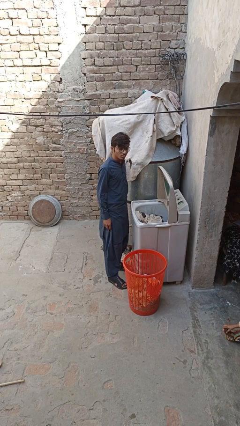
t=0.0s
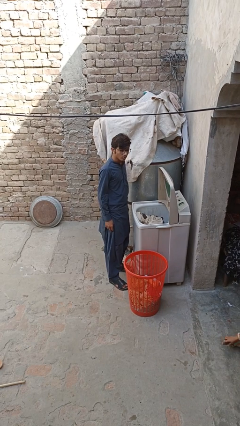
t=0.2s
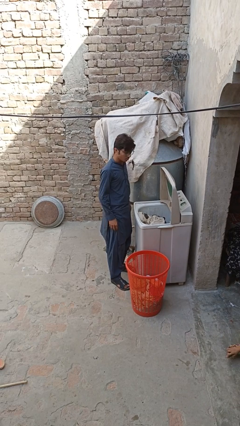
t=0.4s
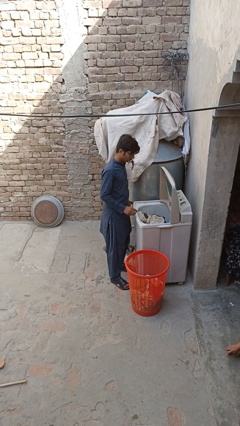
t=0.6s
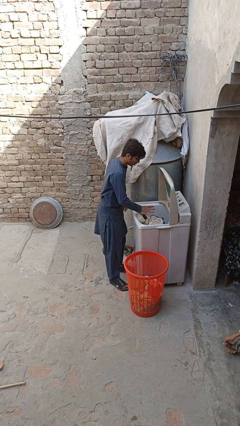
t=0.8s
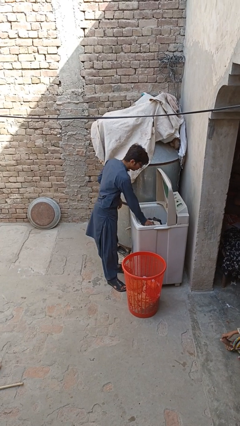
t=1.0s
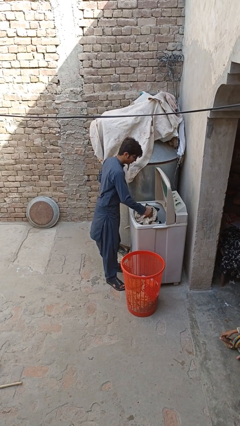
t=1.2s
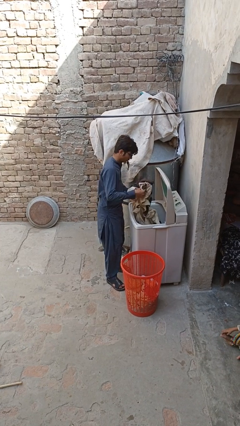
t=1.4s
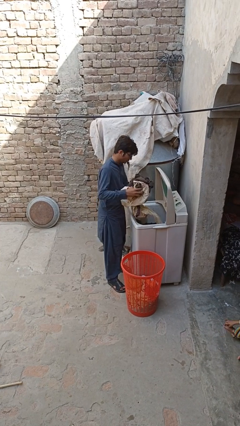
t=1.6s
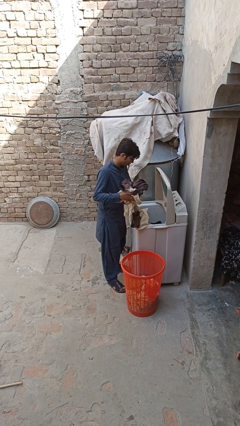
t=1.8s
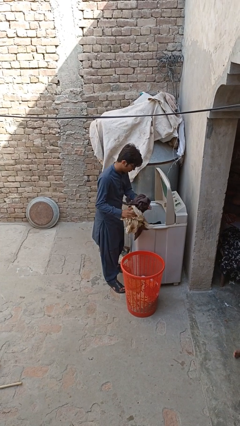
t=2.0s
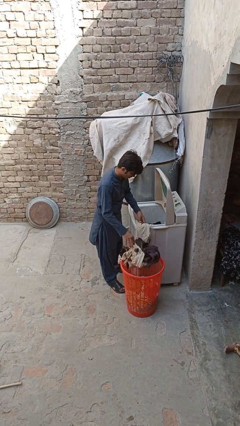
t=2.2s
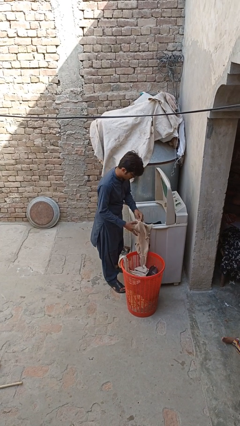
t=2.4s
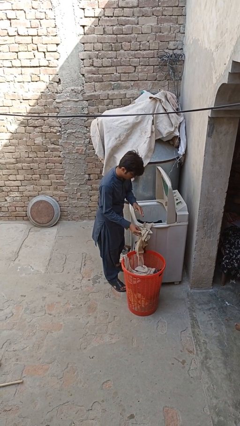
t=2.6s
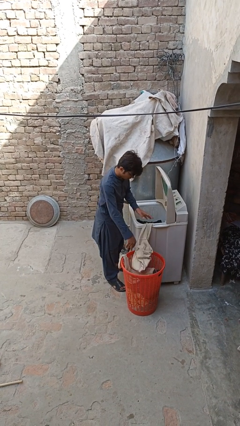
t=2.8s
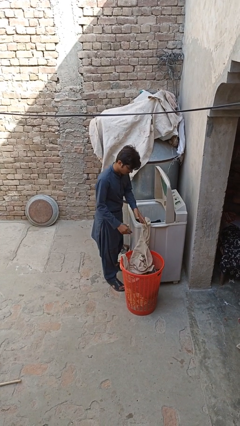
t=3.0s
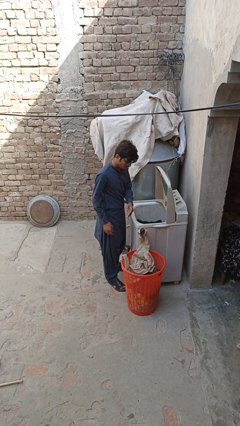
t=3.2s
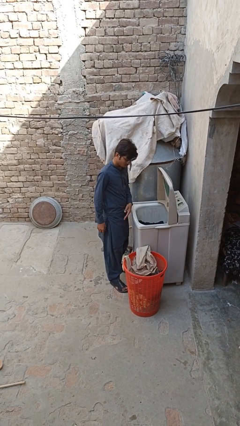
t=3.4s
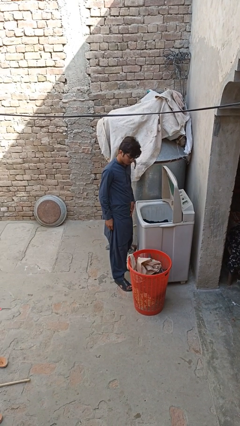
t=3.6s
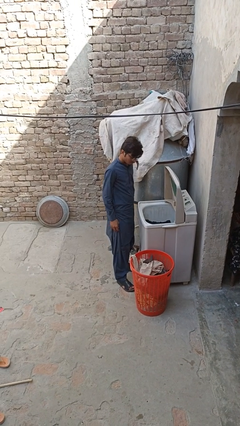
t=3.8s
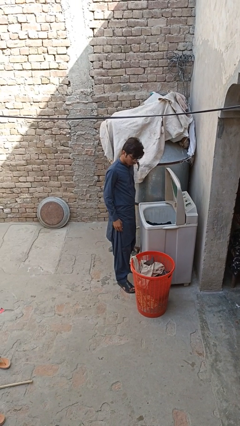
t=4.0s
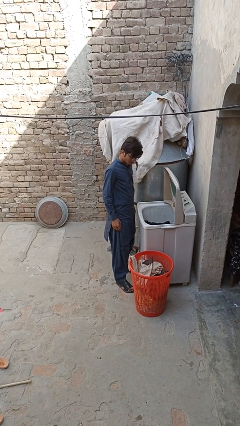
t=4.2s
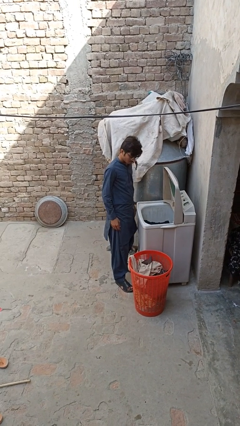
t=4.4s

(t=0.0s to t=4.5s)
person unloads clotheswasher

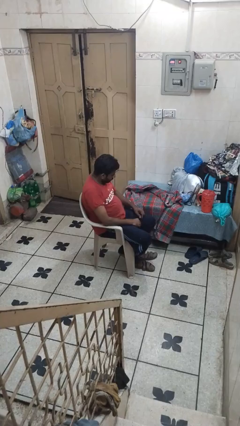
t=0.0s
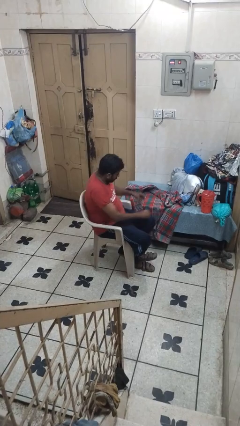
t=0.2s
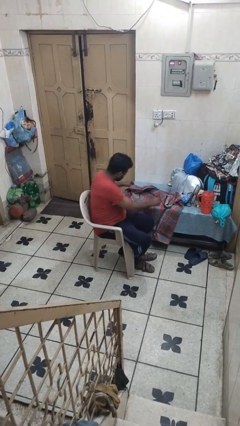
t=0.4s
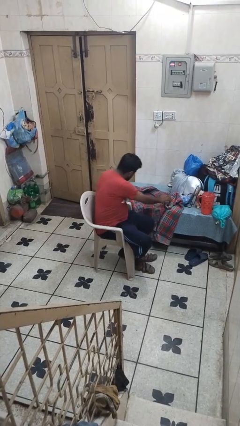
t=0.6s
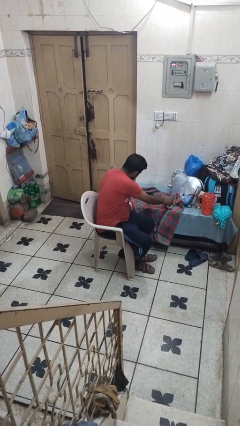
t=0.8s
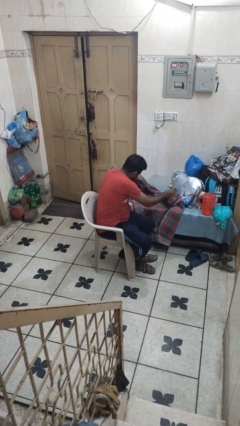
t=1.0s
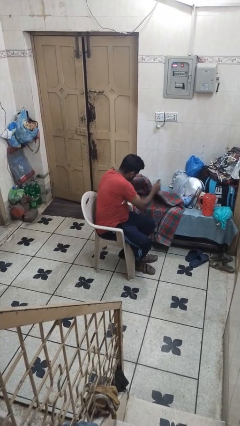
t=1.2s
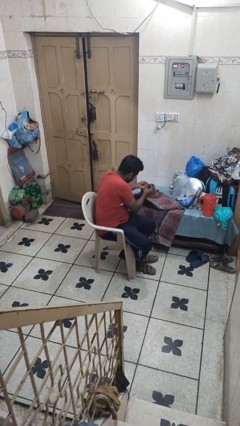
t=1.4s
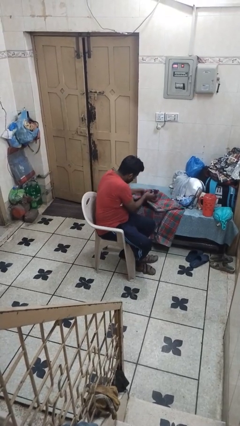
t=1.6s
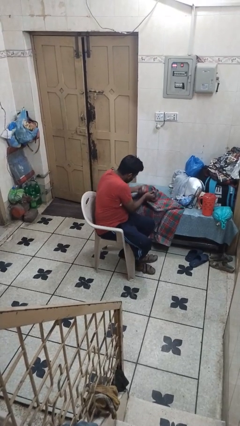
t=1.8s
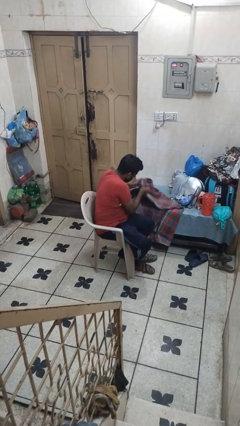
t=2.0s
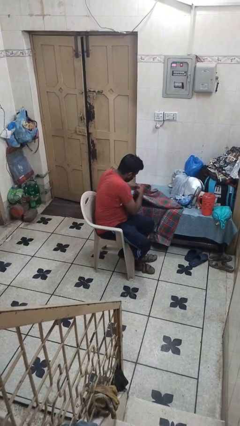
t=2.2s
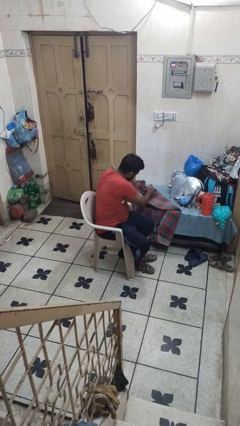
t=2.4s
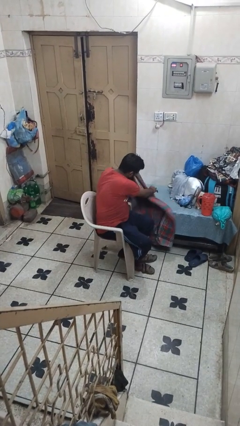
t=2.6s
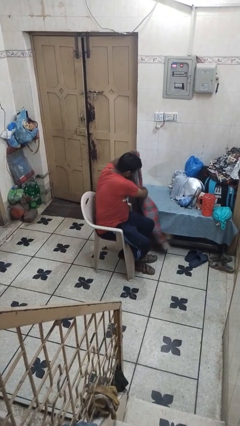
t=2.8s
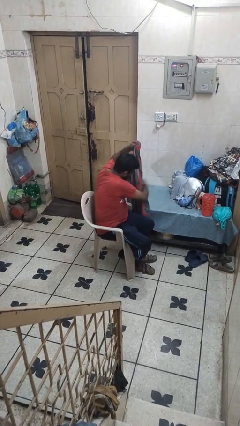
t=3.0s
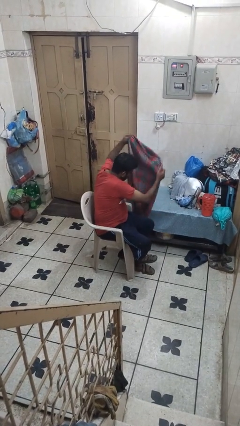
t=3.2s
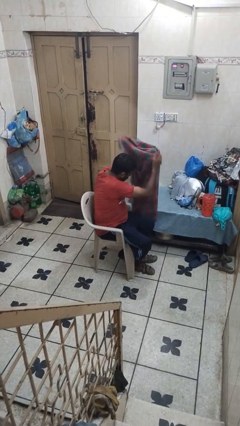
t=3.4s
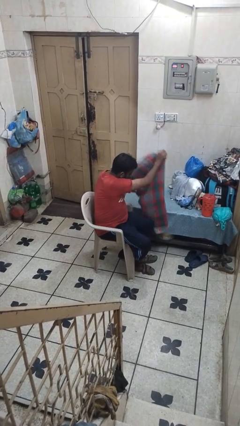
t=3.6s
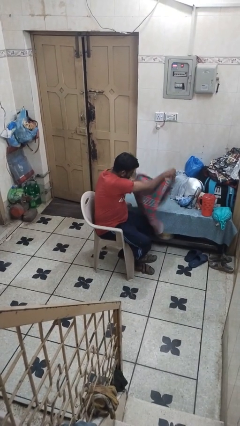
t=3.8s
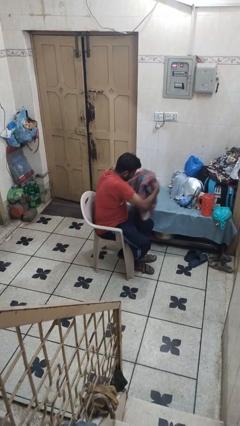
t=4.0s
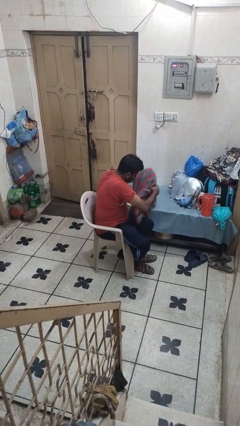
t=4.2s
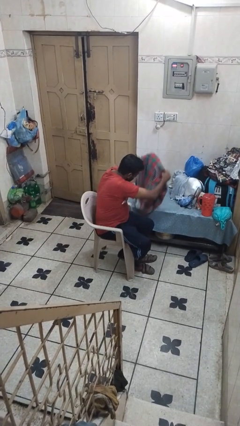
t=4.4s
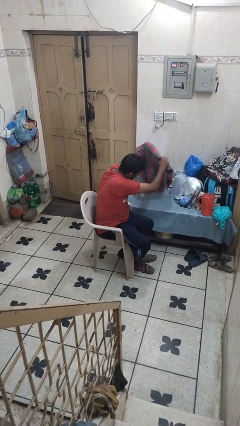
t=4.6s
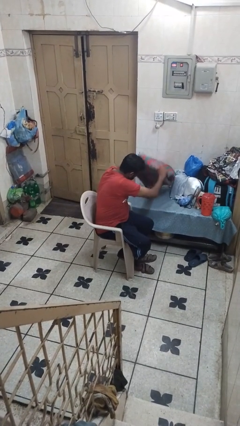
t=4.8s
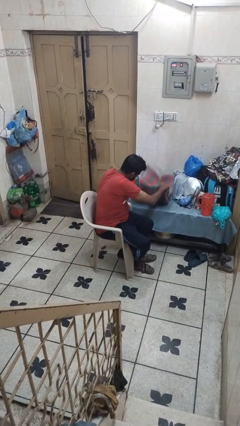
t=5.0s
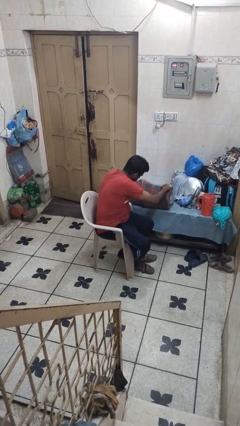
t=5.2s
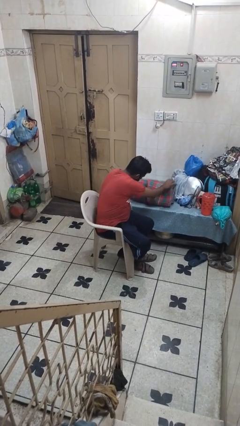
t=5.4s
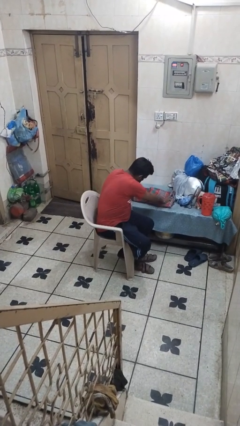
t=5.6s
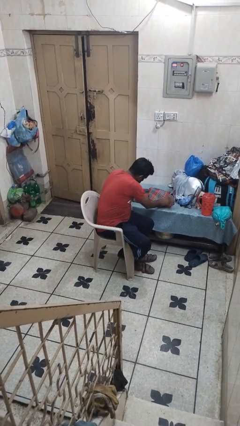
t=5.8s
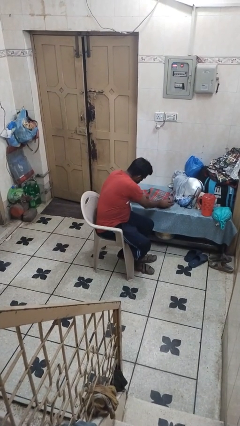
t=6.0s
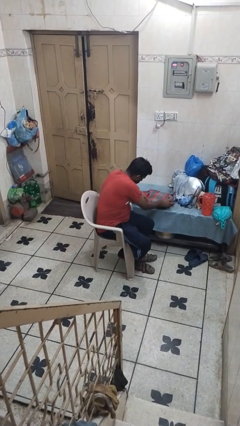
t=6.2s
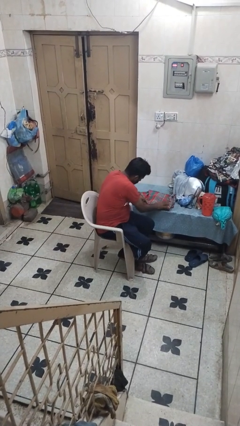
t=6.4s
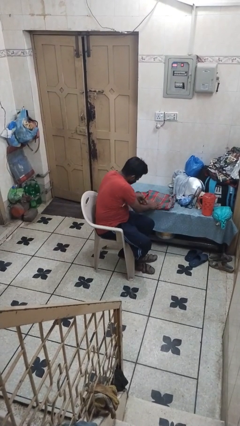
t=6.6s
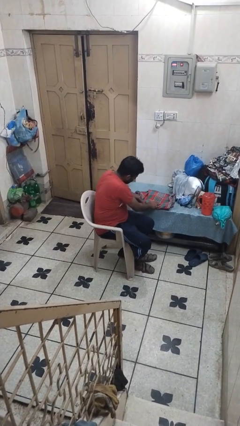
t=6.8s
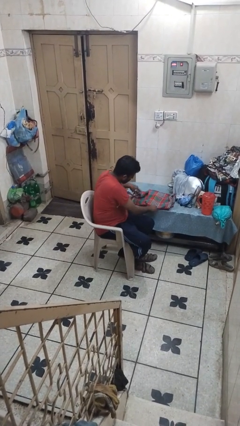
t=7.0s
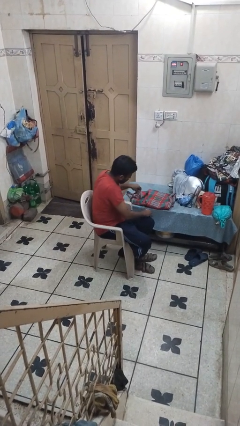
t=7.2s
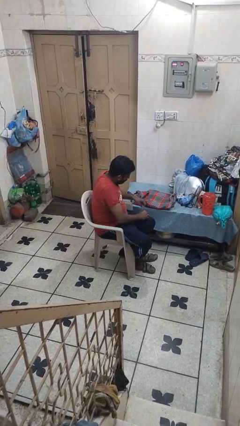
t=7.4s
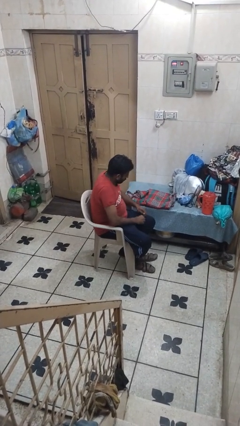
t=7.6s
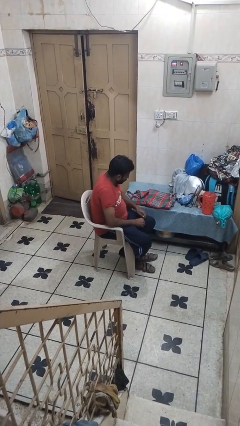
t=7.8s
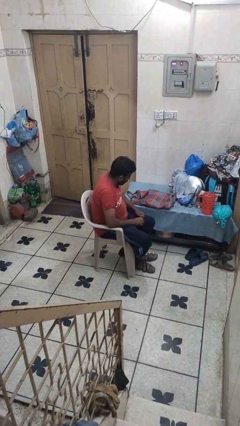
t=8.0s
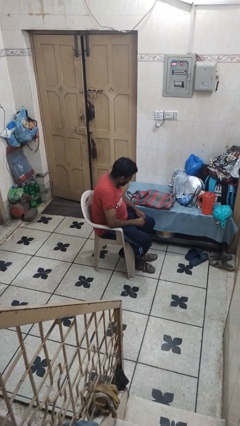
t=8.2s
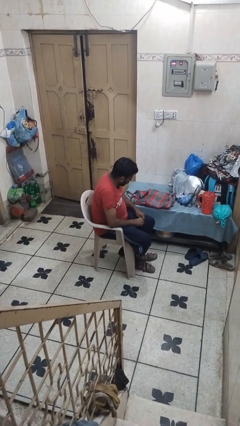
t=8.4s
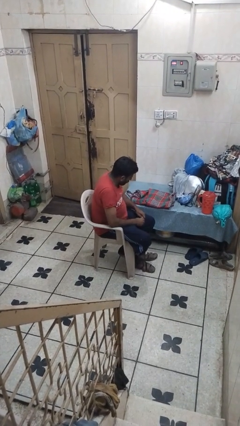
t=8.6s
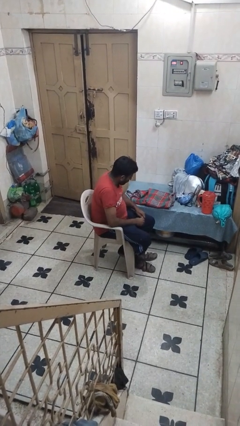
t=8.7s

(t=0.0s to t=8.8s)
person folds blanket

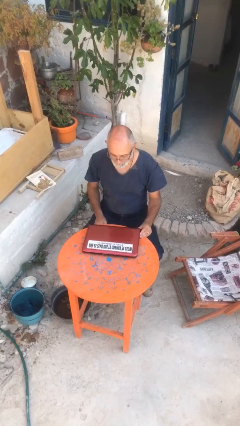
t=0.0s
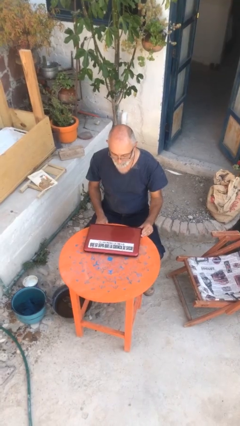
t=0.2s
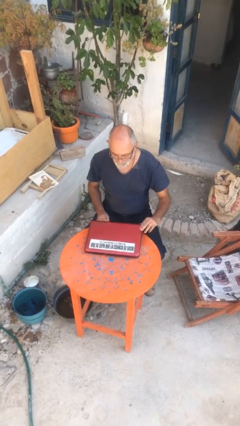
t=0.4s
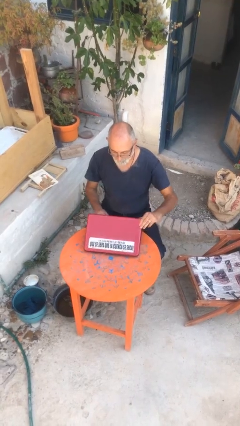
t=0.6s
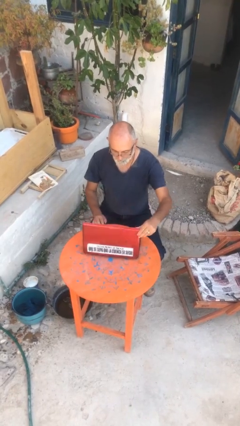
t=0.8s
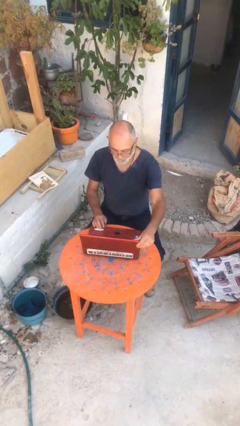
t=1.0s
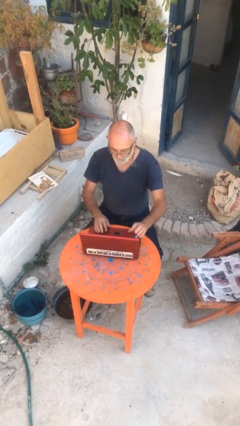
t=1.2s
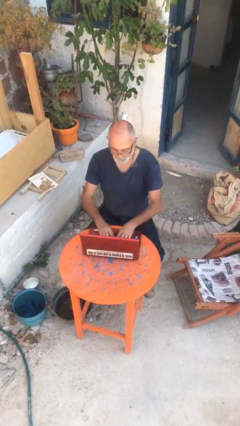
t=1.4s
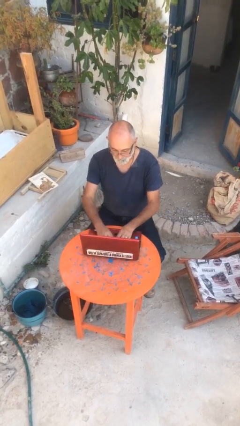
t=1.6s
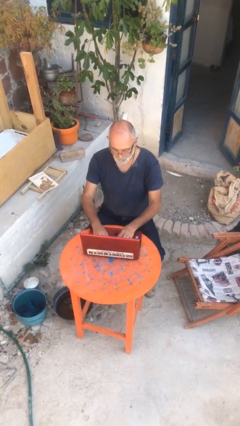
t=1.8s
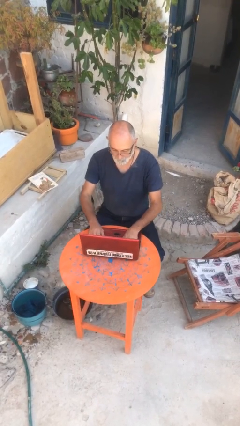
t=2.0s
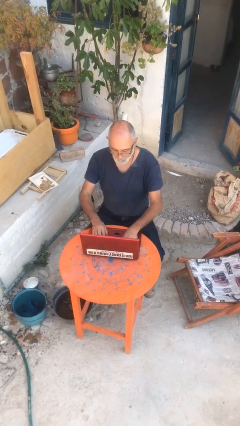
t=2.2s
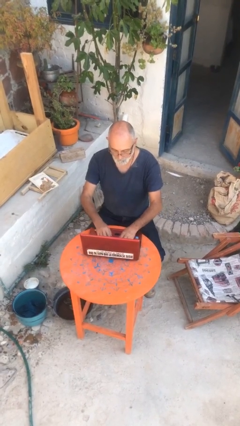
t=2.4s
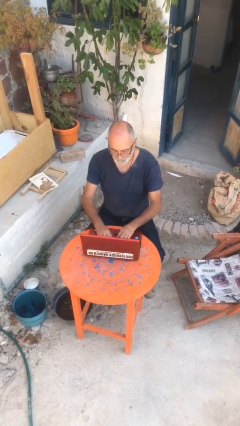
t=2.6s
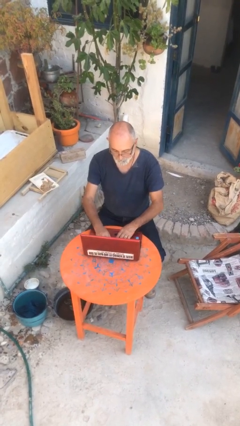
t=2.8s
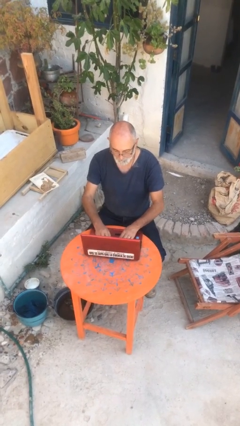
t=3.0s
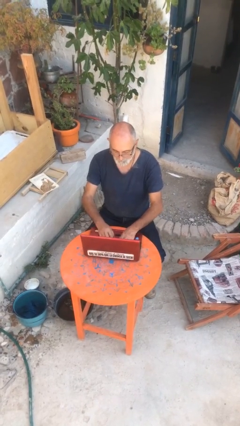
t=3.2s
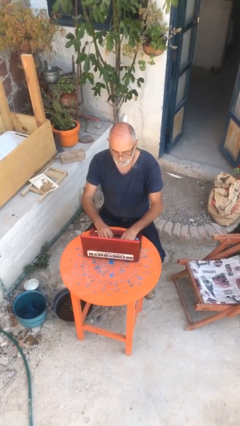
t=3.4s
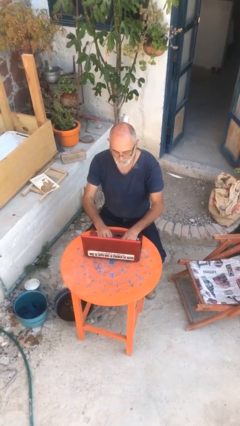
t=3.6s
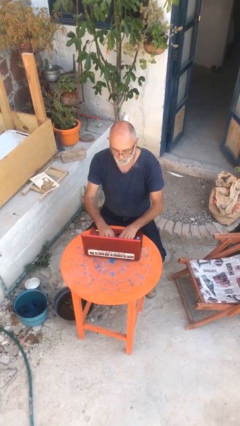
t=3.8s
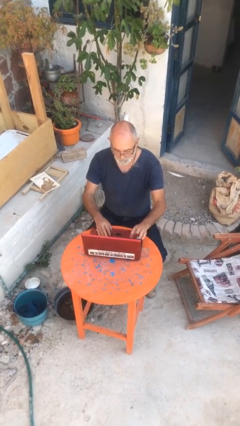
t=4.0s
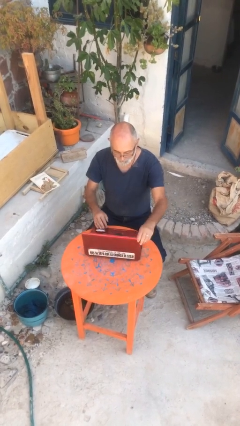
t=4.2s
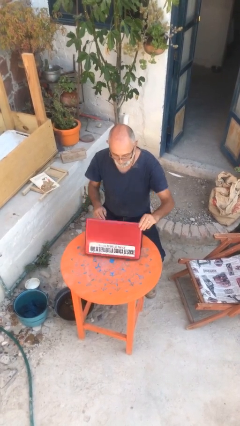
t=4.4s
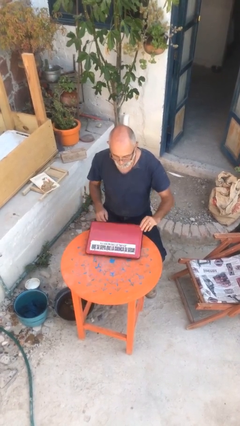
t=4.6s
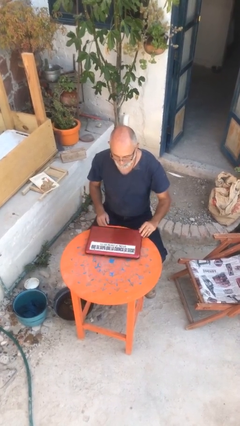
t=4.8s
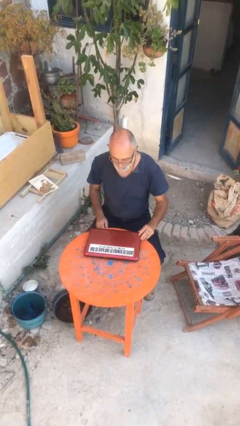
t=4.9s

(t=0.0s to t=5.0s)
person interacts with laptop
